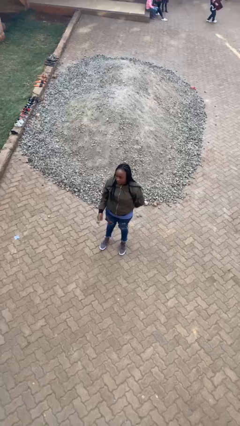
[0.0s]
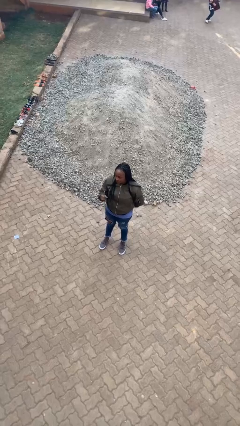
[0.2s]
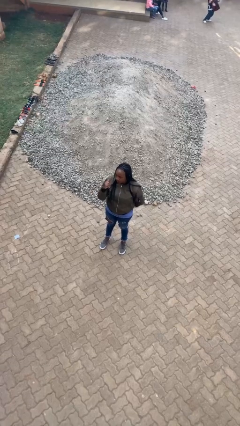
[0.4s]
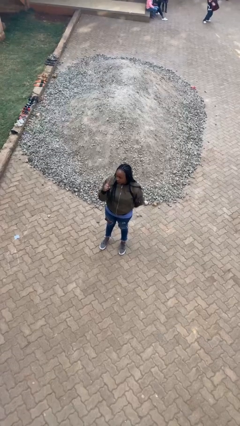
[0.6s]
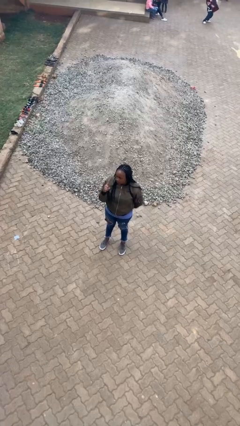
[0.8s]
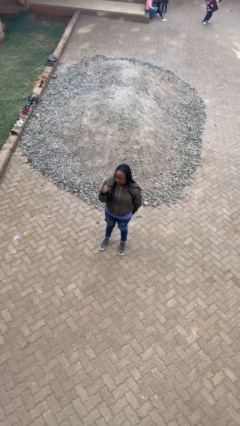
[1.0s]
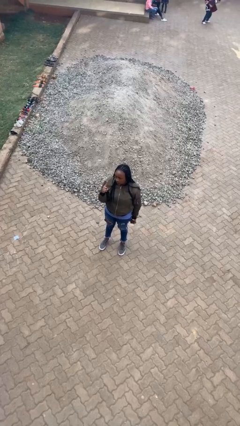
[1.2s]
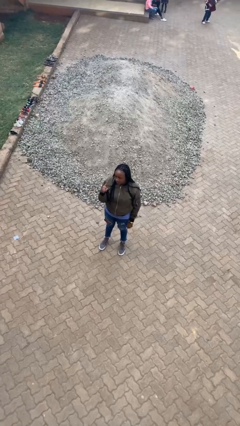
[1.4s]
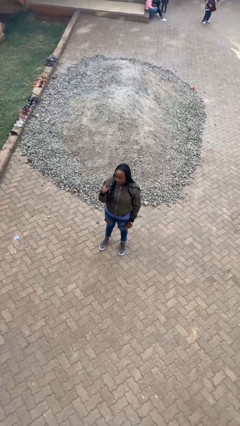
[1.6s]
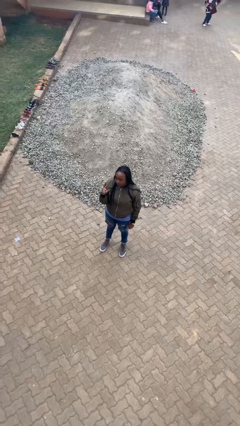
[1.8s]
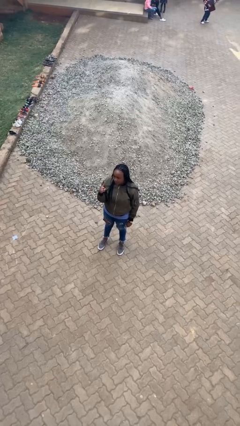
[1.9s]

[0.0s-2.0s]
person gestures number one

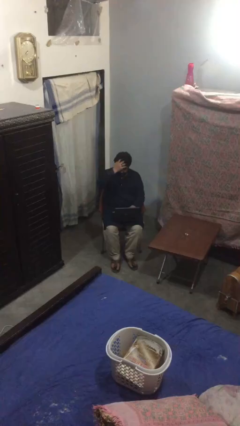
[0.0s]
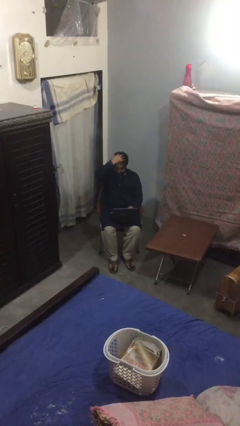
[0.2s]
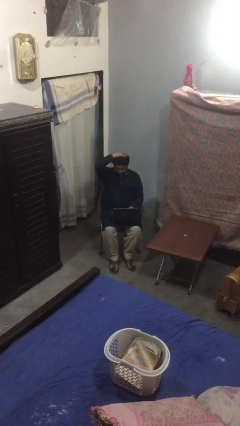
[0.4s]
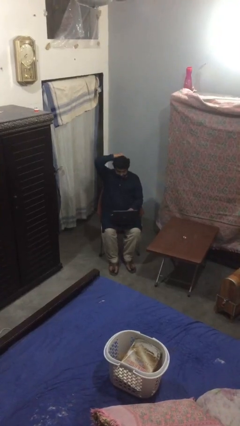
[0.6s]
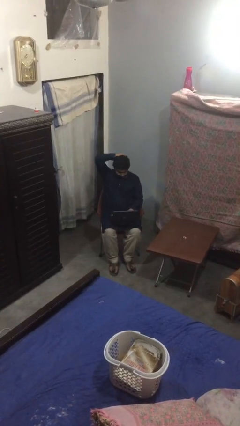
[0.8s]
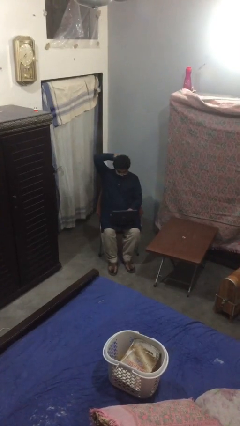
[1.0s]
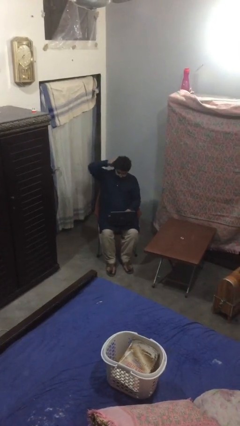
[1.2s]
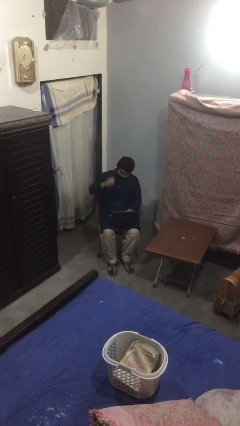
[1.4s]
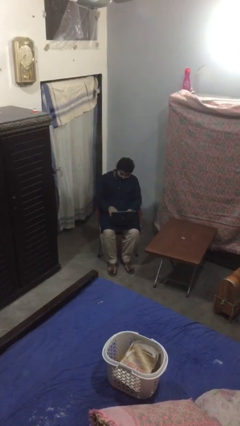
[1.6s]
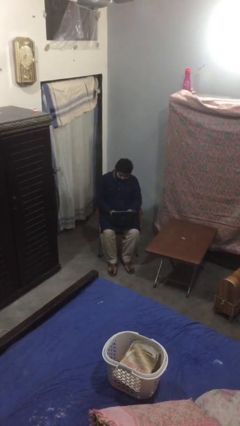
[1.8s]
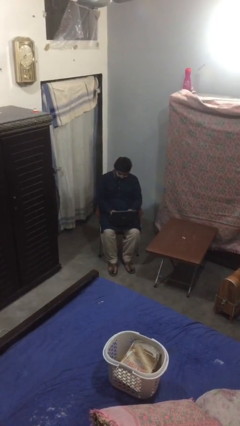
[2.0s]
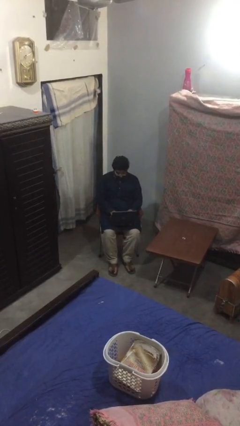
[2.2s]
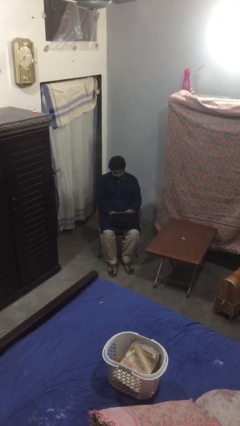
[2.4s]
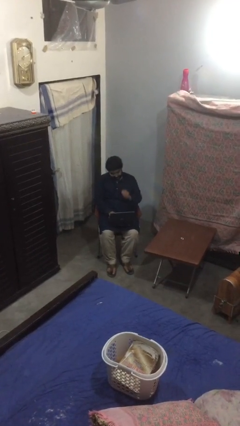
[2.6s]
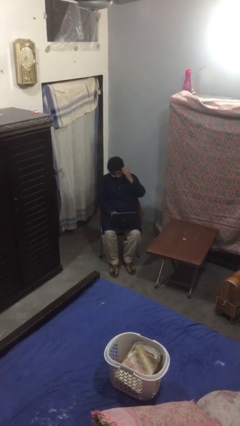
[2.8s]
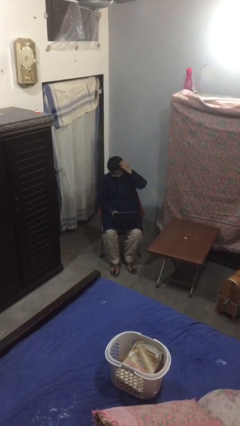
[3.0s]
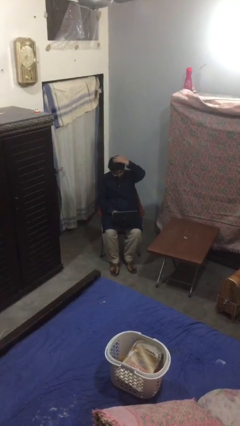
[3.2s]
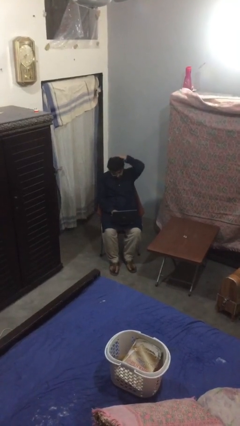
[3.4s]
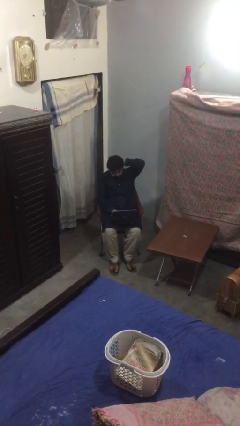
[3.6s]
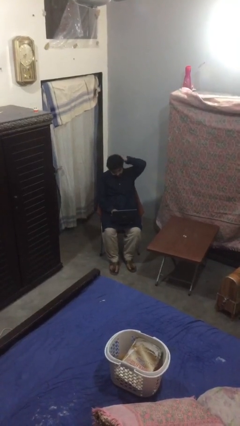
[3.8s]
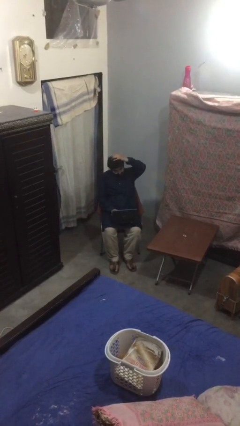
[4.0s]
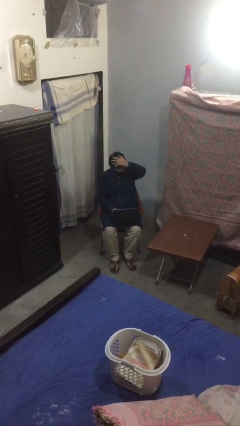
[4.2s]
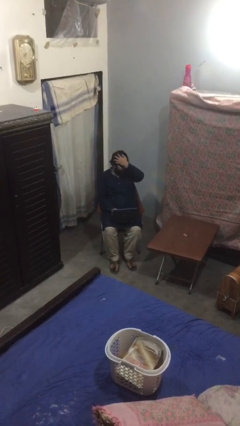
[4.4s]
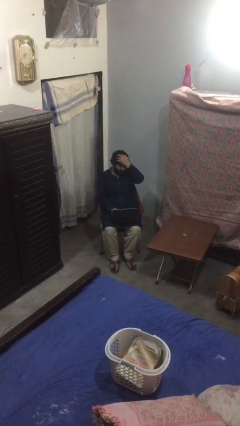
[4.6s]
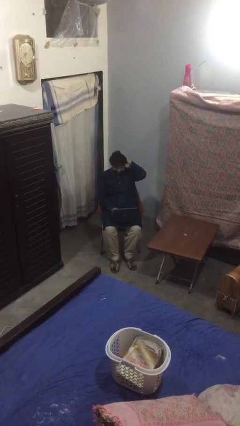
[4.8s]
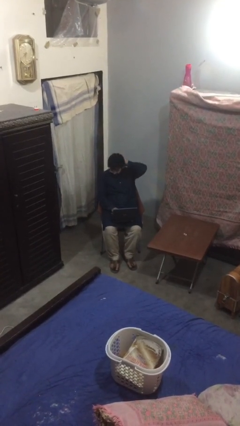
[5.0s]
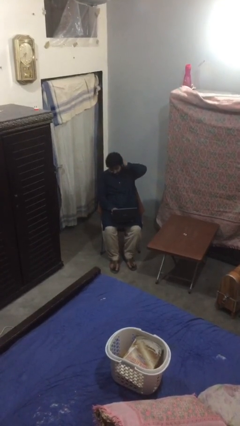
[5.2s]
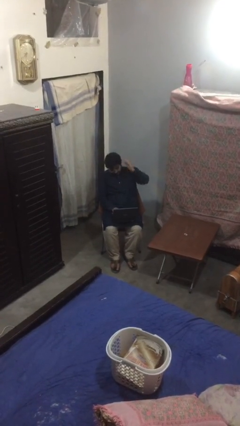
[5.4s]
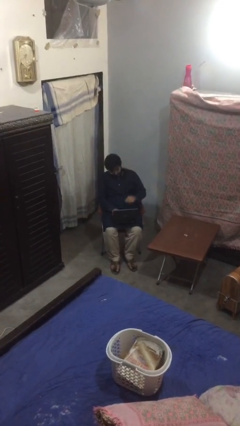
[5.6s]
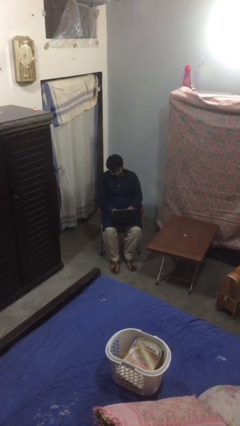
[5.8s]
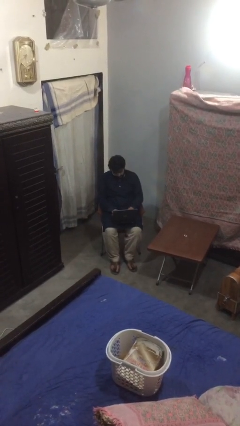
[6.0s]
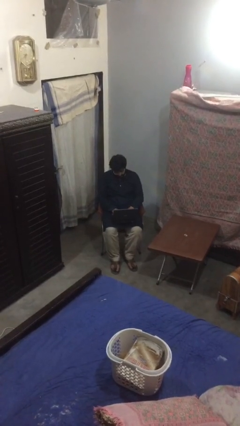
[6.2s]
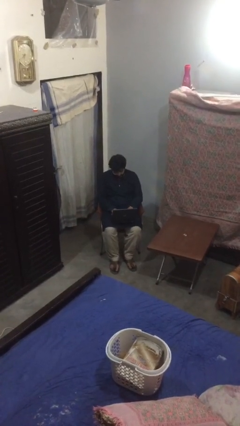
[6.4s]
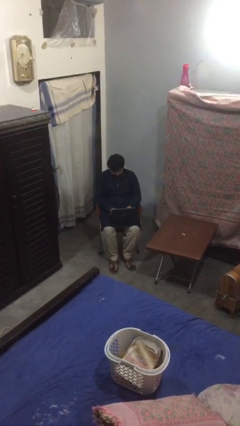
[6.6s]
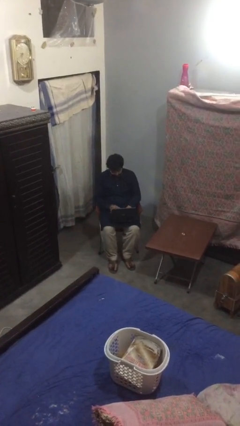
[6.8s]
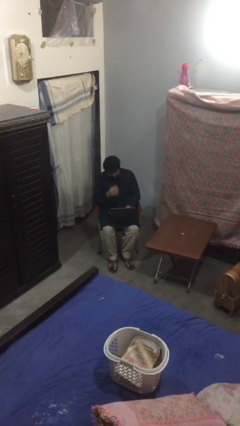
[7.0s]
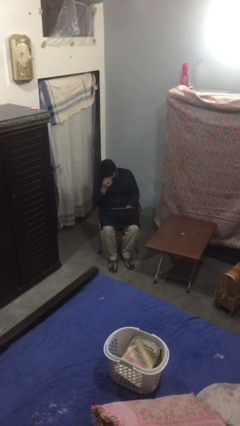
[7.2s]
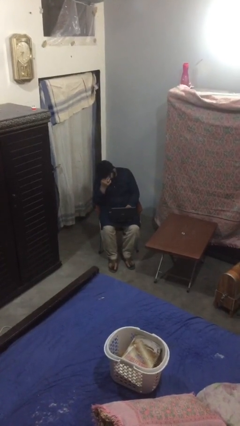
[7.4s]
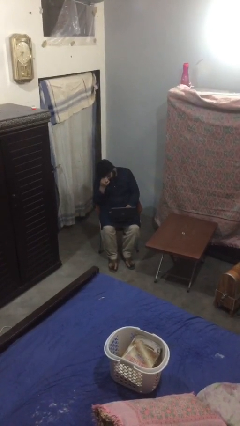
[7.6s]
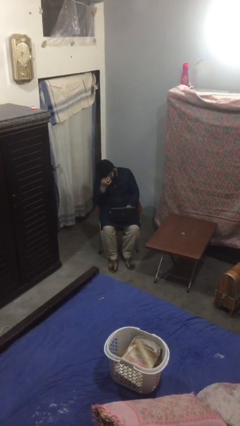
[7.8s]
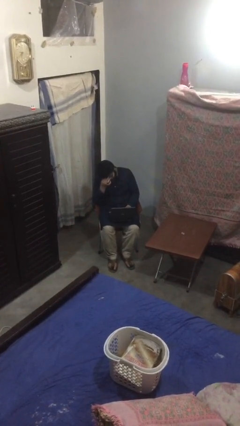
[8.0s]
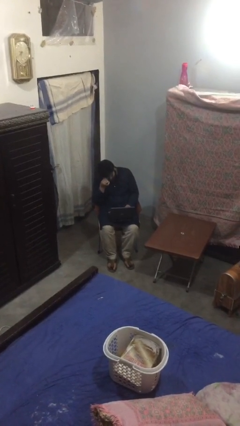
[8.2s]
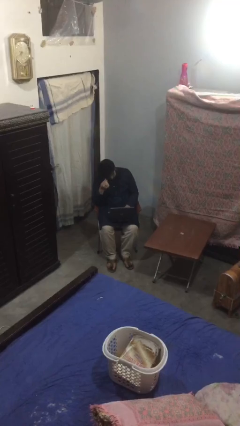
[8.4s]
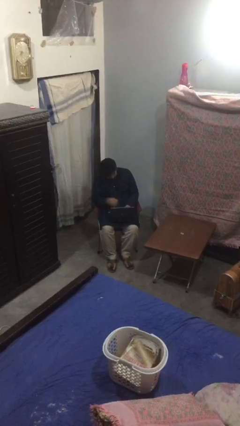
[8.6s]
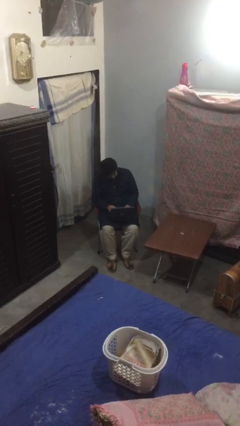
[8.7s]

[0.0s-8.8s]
person interacts with laptop

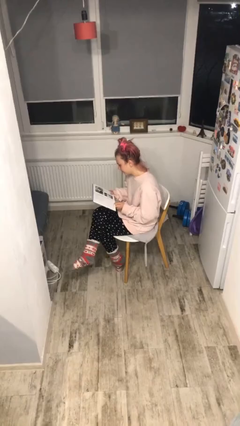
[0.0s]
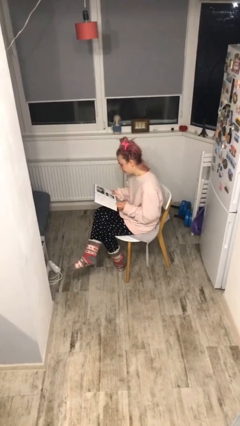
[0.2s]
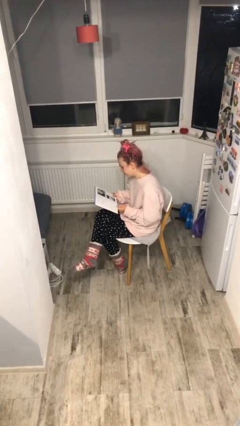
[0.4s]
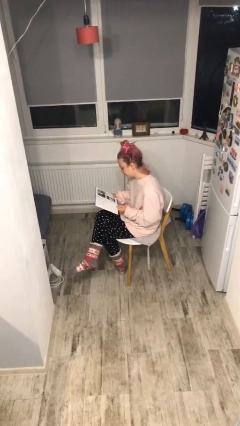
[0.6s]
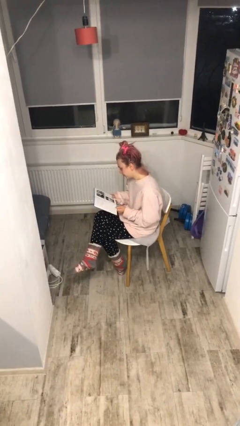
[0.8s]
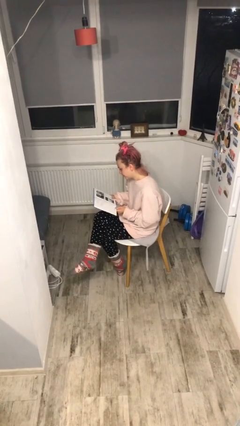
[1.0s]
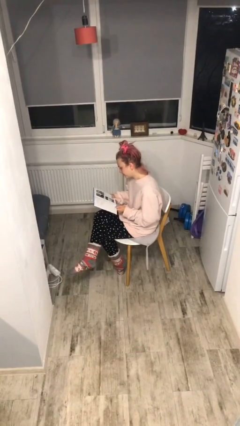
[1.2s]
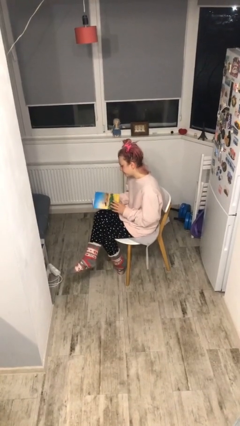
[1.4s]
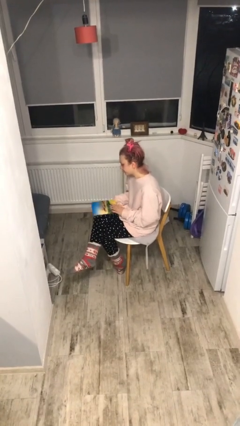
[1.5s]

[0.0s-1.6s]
person reads document

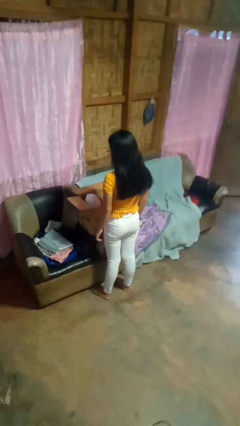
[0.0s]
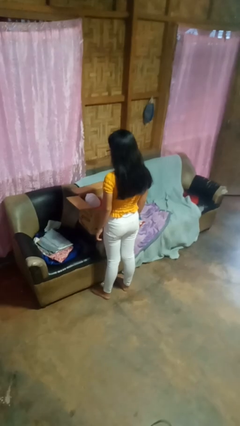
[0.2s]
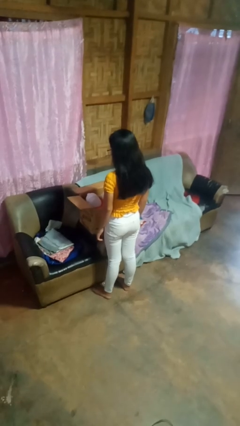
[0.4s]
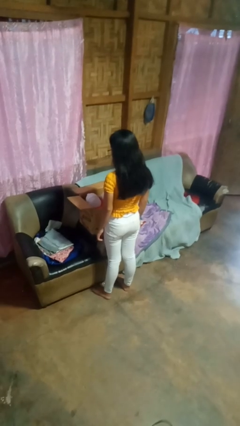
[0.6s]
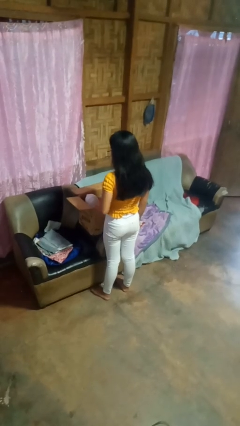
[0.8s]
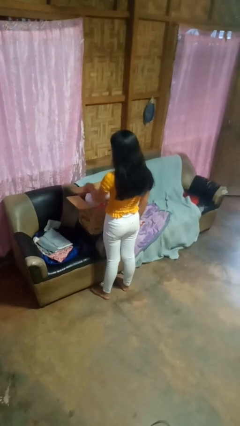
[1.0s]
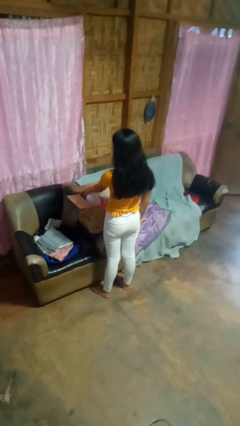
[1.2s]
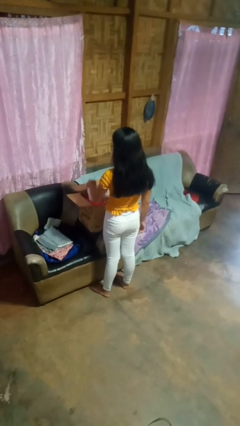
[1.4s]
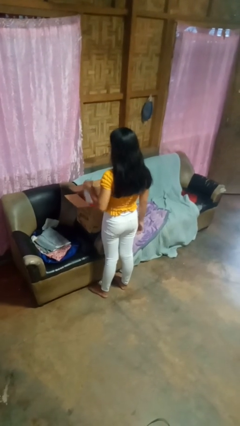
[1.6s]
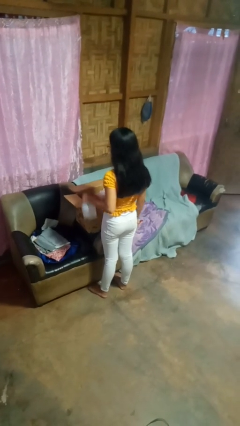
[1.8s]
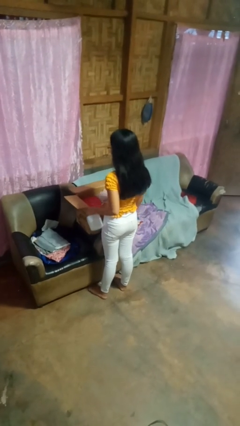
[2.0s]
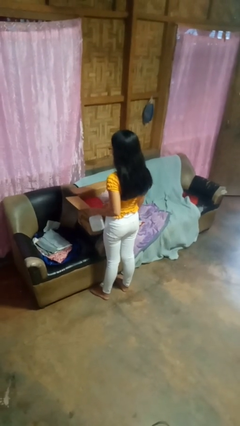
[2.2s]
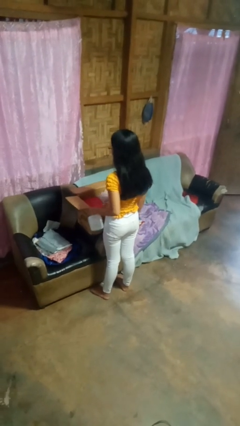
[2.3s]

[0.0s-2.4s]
person takes object from box

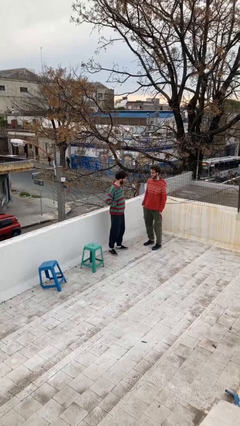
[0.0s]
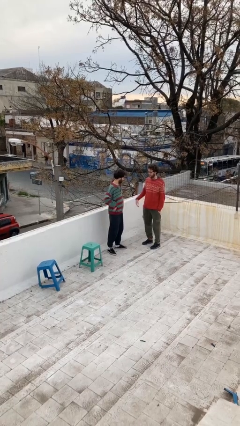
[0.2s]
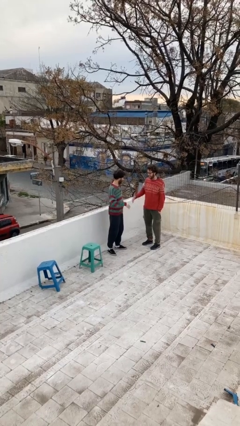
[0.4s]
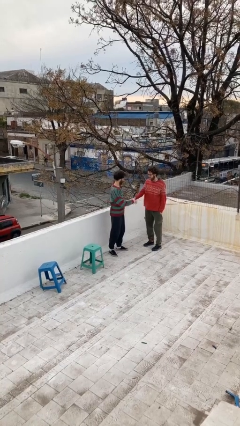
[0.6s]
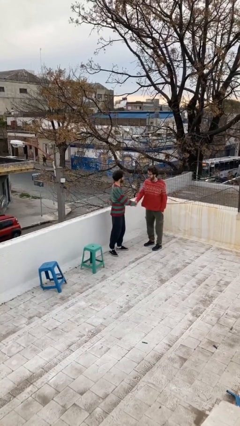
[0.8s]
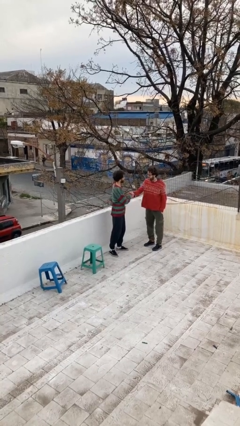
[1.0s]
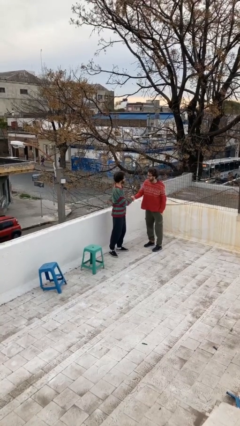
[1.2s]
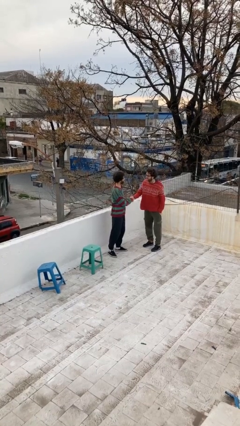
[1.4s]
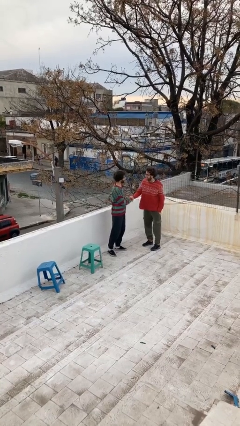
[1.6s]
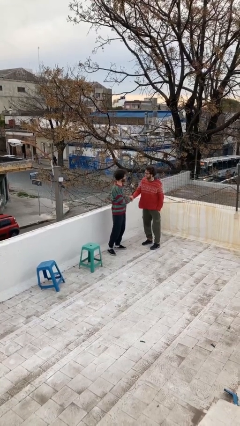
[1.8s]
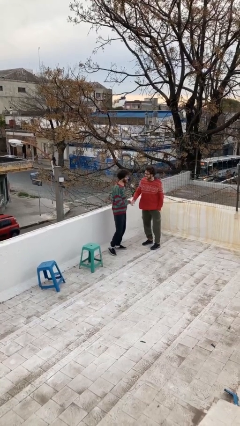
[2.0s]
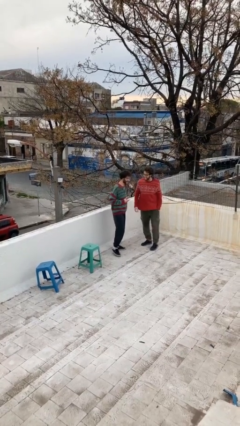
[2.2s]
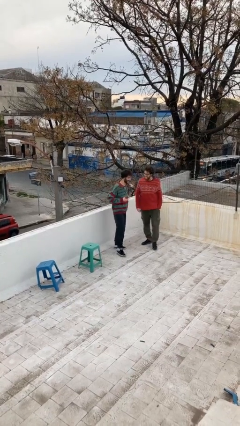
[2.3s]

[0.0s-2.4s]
person shakes hand
